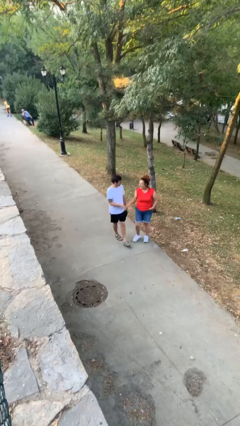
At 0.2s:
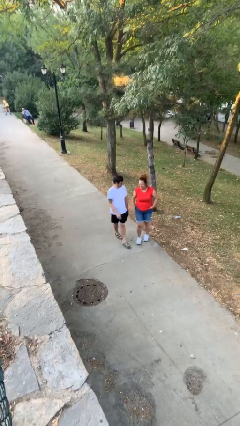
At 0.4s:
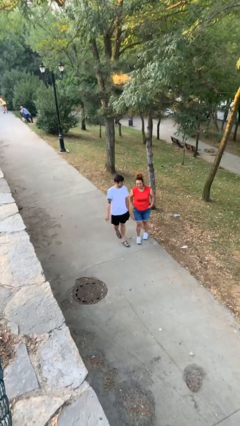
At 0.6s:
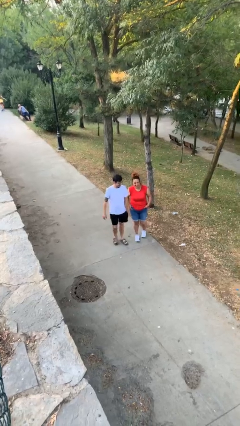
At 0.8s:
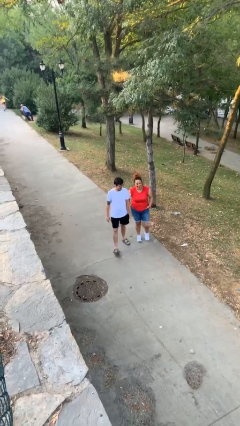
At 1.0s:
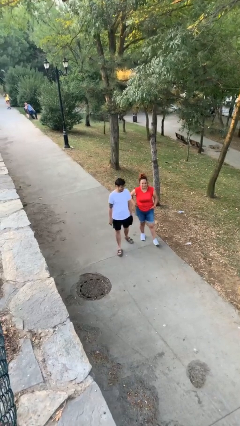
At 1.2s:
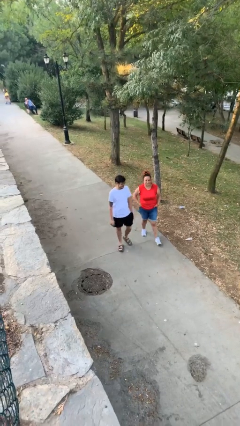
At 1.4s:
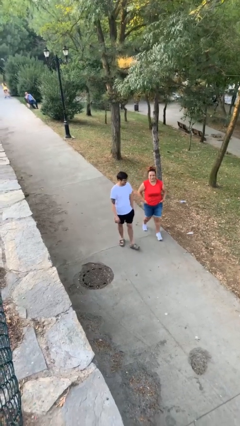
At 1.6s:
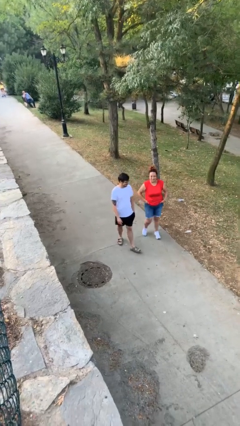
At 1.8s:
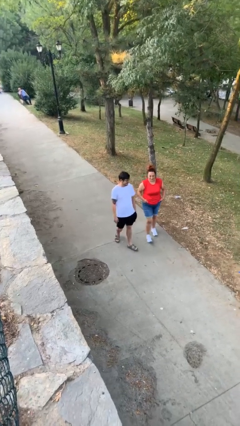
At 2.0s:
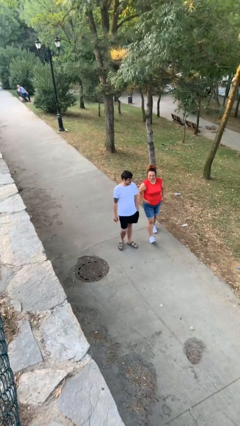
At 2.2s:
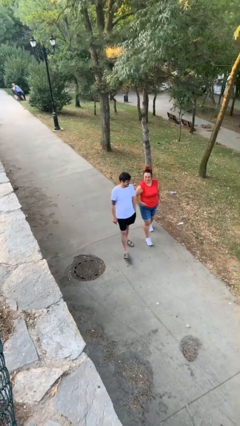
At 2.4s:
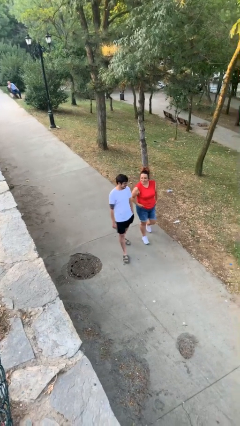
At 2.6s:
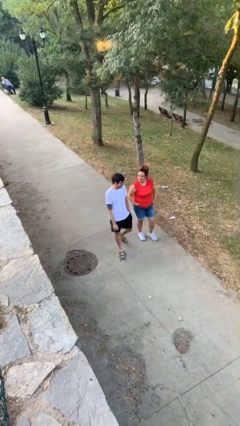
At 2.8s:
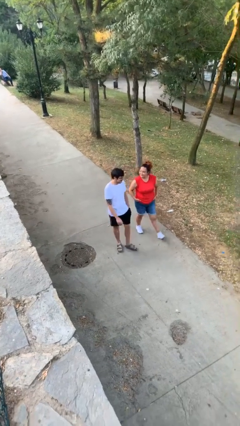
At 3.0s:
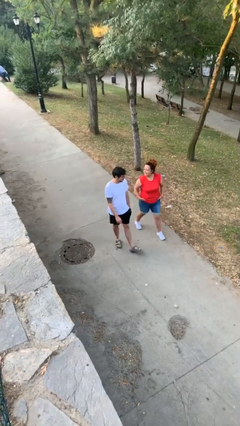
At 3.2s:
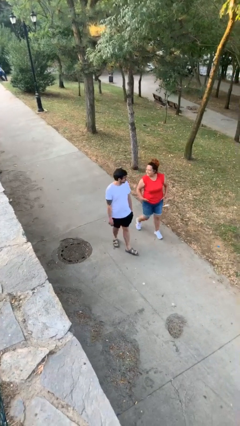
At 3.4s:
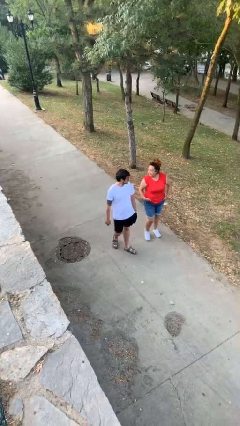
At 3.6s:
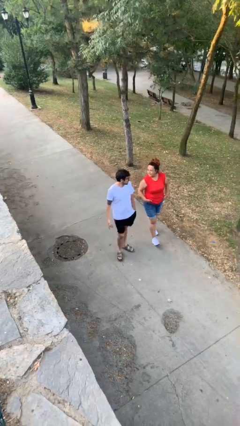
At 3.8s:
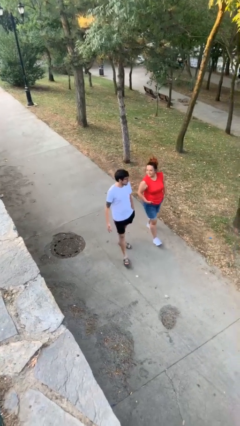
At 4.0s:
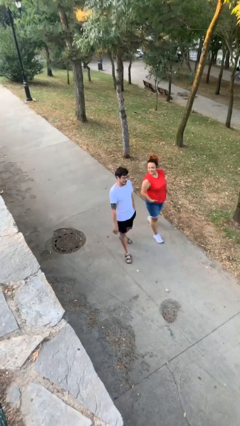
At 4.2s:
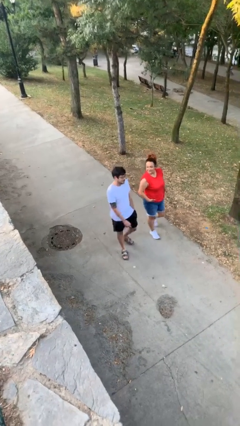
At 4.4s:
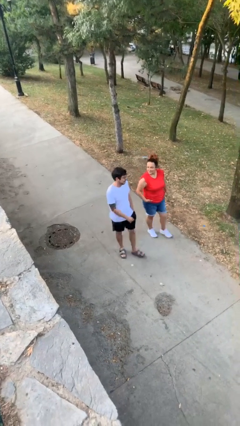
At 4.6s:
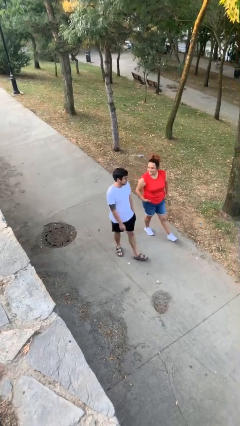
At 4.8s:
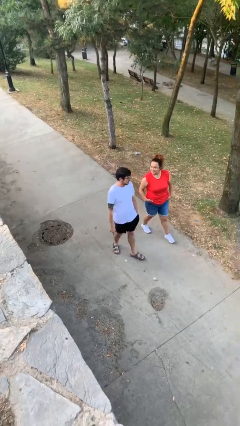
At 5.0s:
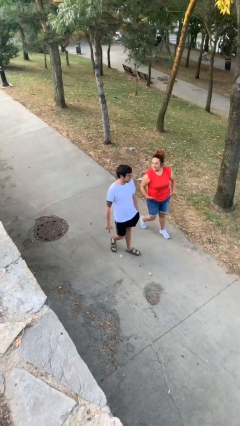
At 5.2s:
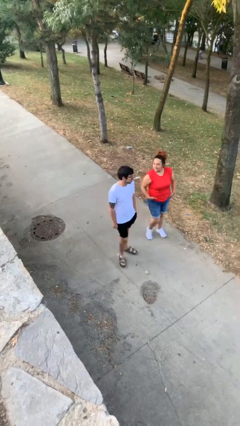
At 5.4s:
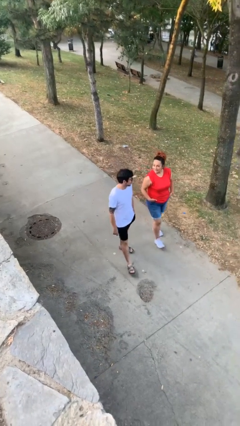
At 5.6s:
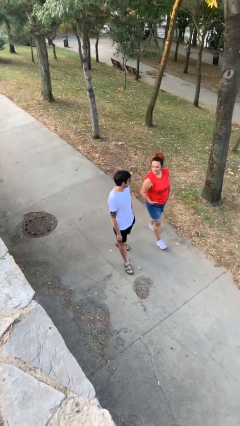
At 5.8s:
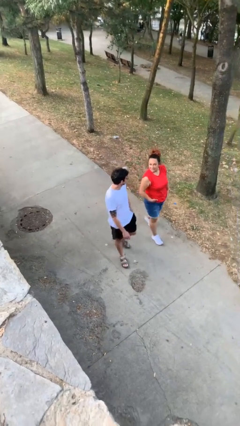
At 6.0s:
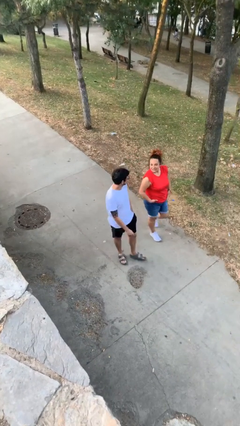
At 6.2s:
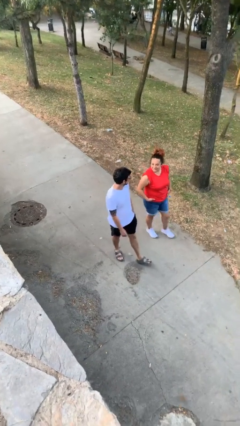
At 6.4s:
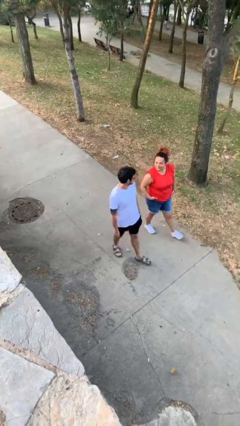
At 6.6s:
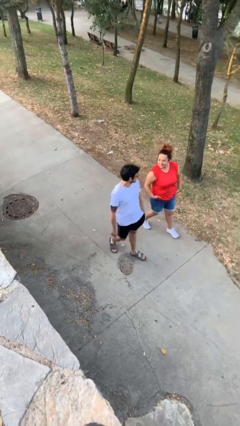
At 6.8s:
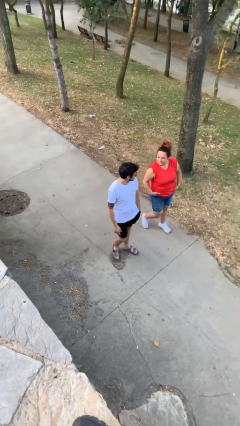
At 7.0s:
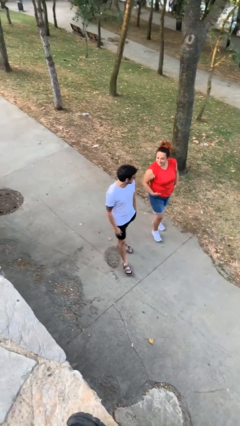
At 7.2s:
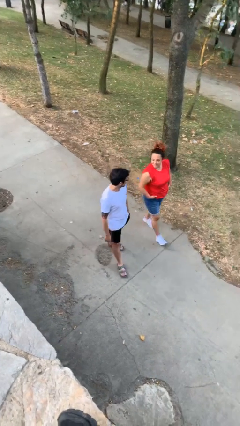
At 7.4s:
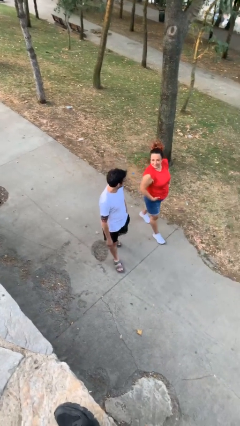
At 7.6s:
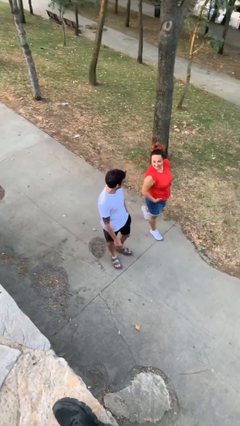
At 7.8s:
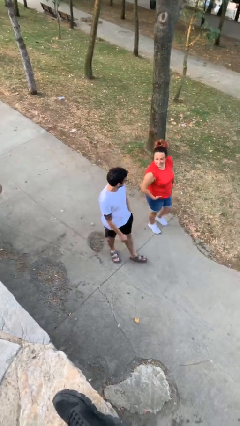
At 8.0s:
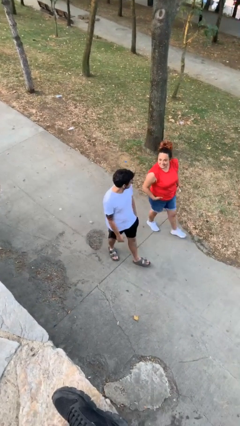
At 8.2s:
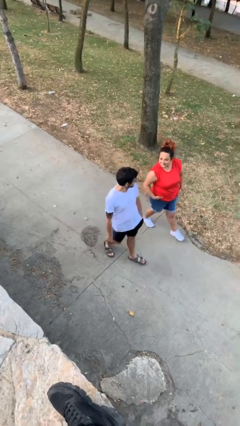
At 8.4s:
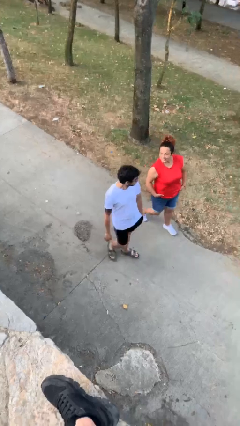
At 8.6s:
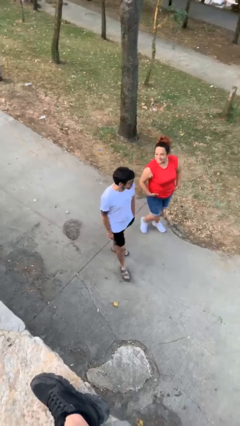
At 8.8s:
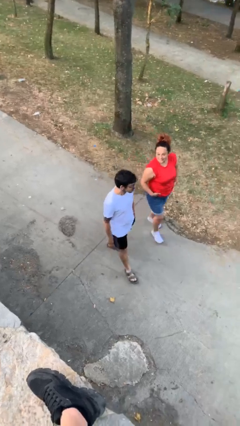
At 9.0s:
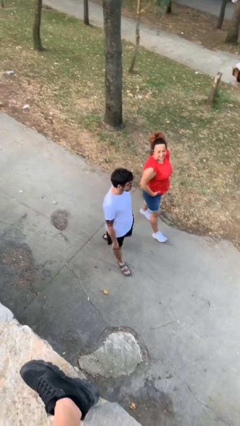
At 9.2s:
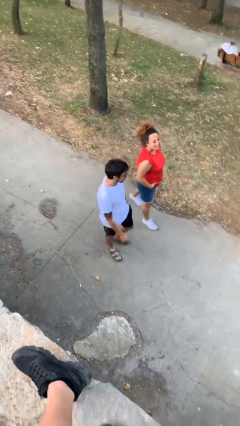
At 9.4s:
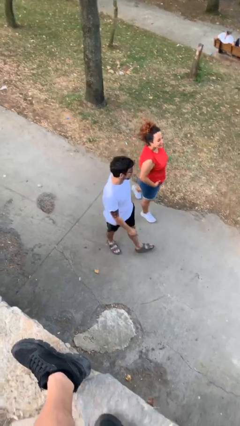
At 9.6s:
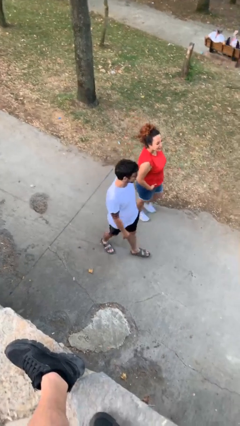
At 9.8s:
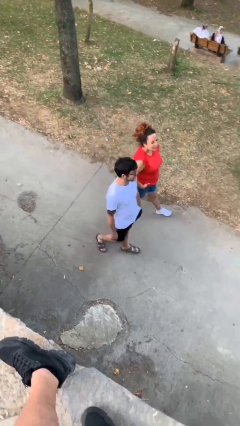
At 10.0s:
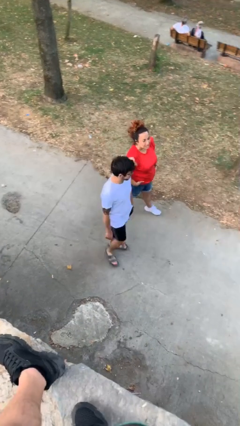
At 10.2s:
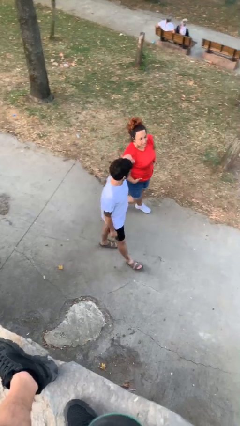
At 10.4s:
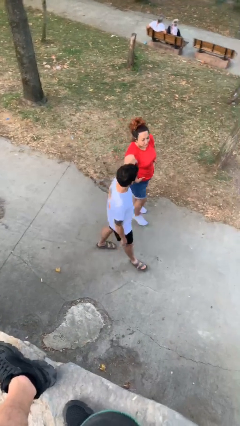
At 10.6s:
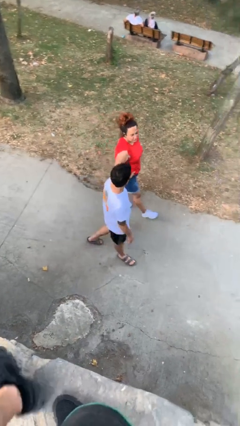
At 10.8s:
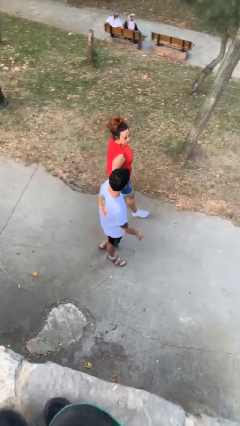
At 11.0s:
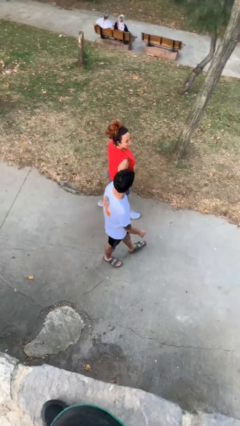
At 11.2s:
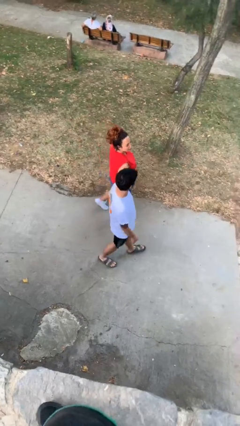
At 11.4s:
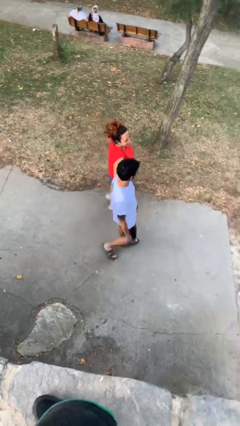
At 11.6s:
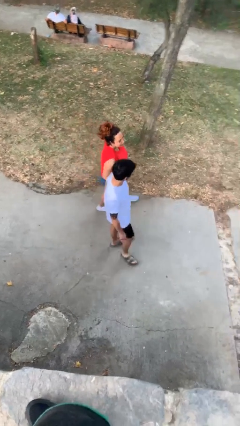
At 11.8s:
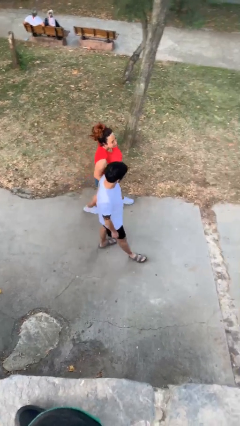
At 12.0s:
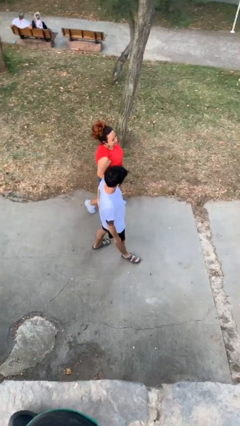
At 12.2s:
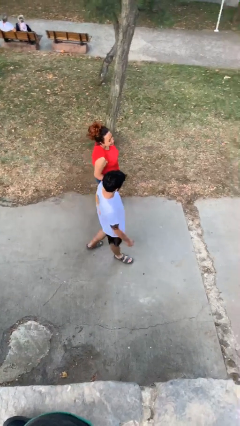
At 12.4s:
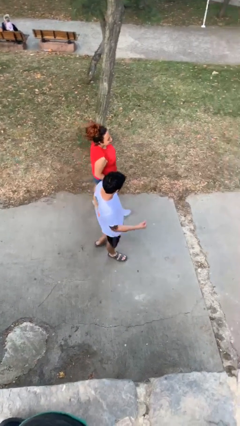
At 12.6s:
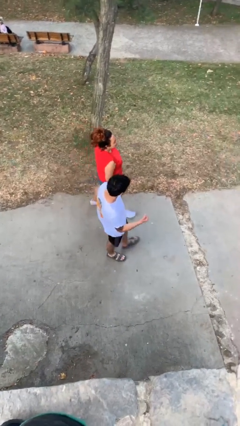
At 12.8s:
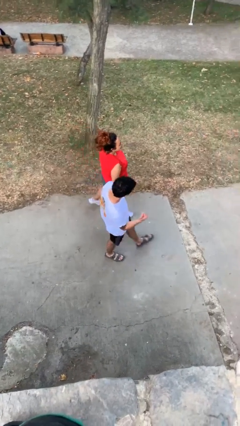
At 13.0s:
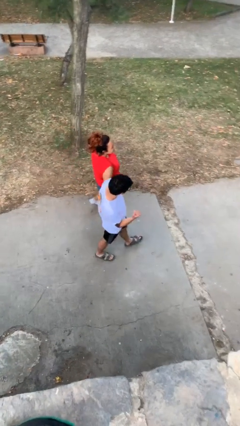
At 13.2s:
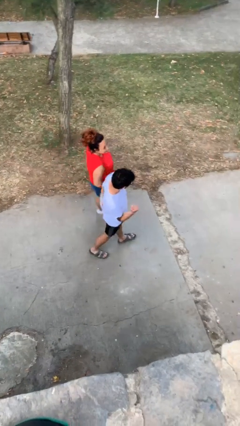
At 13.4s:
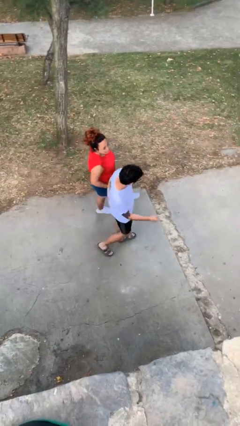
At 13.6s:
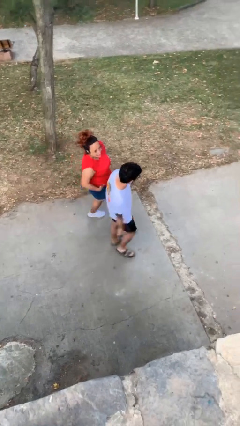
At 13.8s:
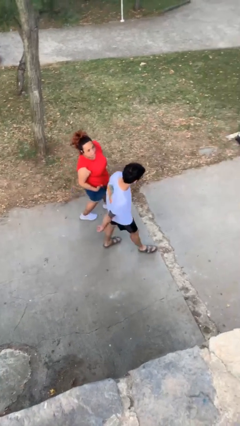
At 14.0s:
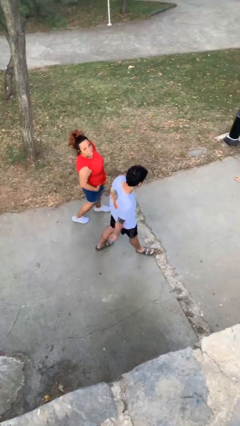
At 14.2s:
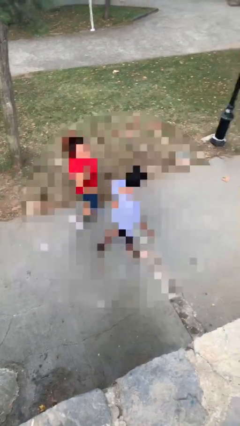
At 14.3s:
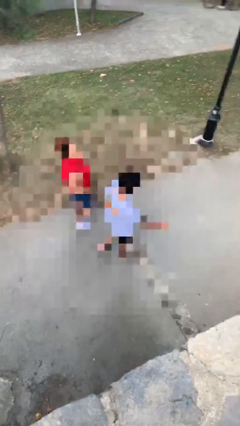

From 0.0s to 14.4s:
person talks to person

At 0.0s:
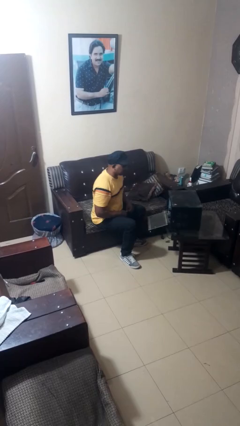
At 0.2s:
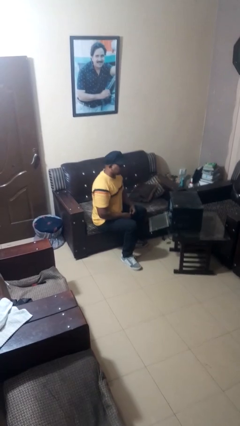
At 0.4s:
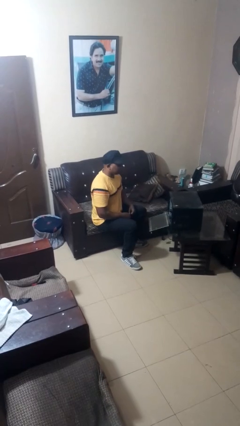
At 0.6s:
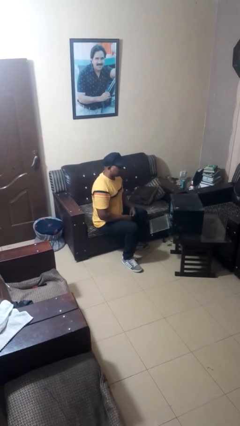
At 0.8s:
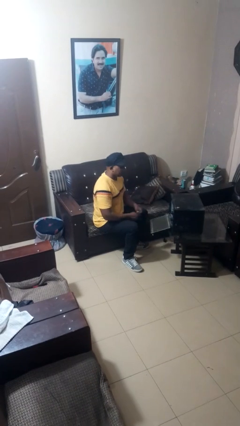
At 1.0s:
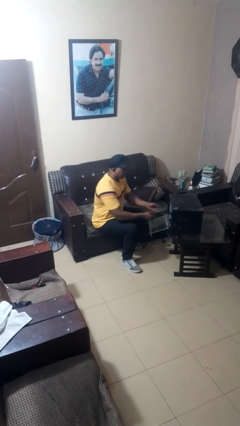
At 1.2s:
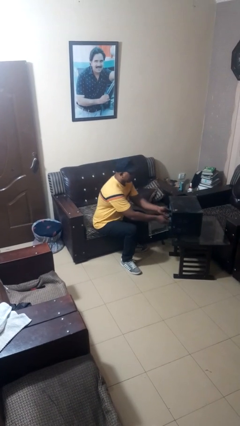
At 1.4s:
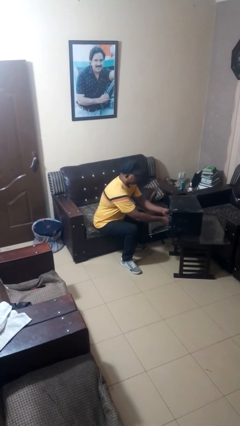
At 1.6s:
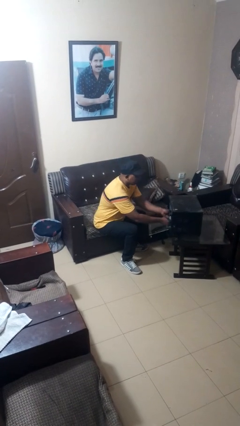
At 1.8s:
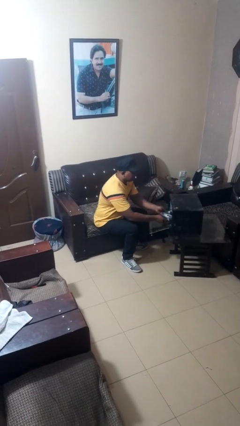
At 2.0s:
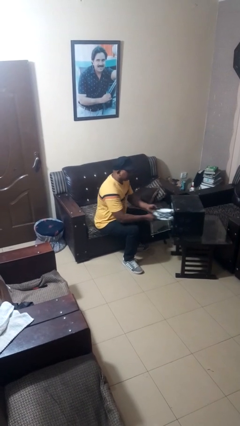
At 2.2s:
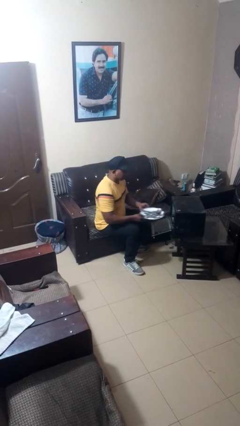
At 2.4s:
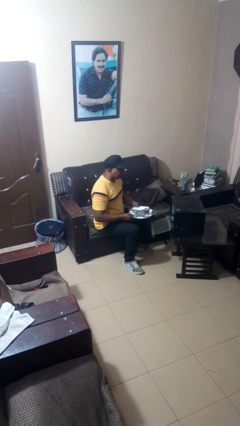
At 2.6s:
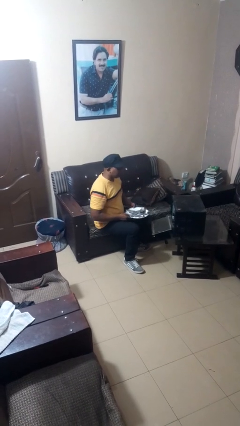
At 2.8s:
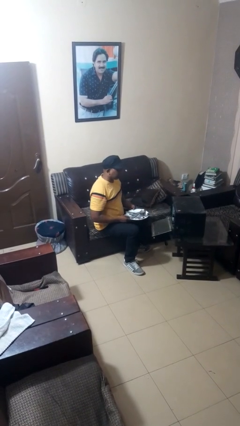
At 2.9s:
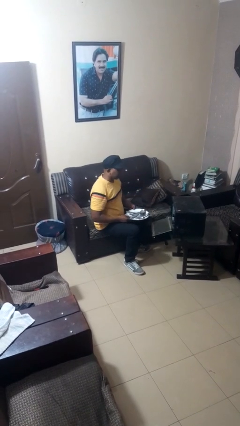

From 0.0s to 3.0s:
person unloads dishwasher

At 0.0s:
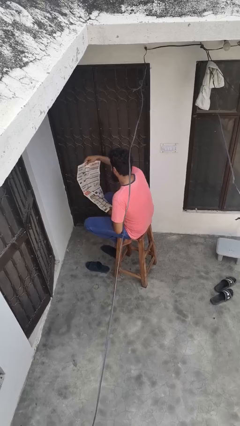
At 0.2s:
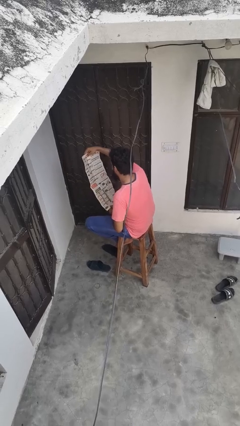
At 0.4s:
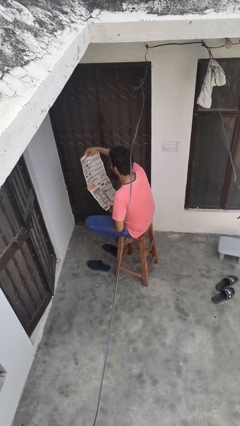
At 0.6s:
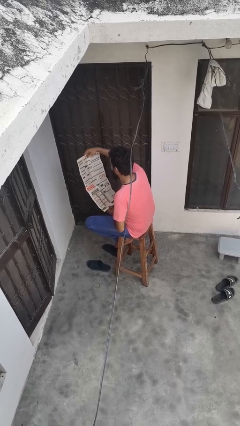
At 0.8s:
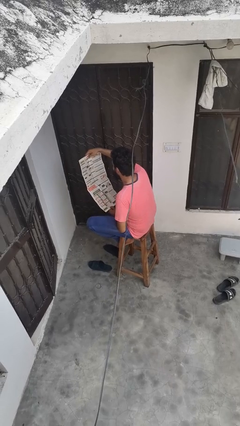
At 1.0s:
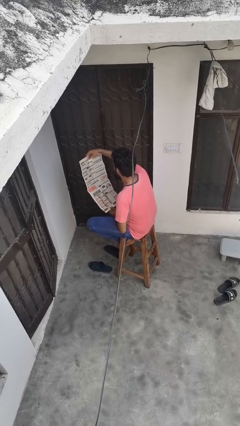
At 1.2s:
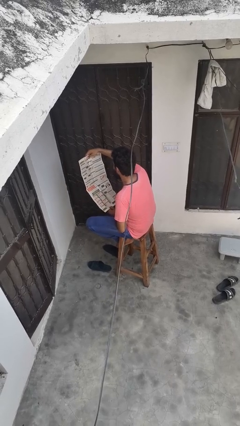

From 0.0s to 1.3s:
person reads newspaper
